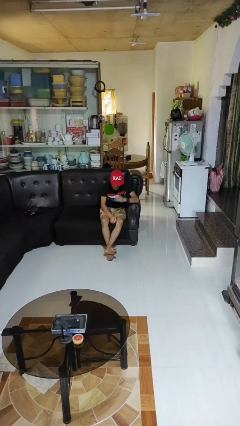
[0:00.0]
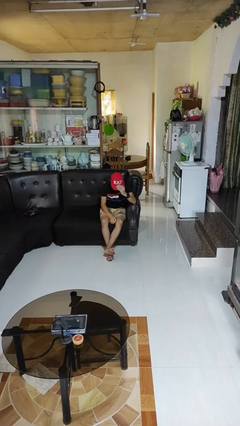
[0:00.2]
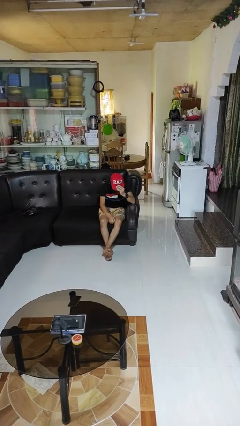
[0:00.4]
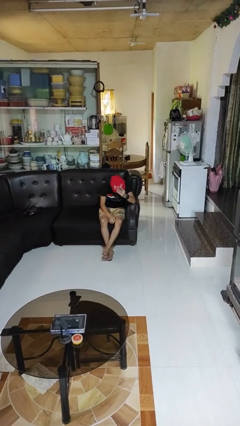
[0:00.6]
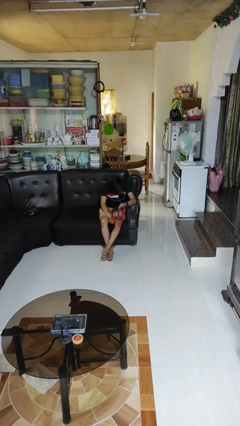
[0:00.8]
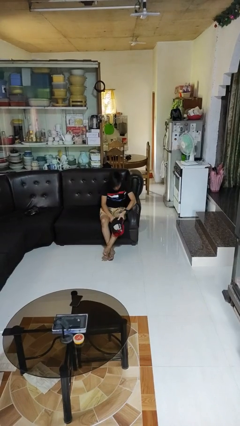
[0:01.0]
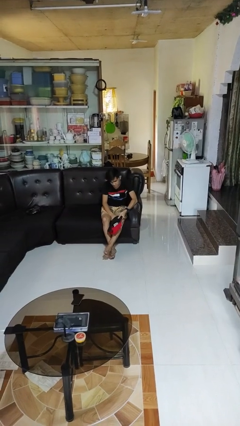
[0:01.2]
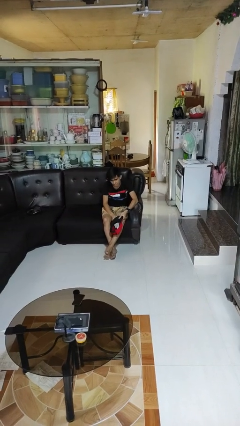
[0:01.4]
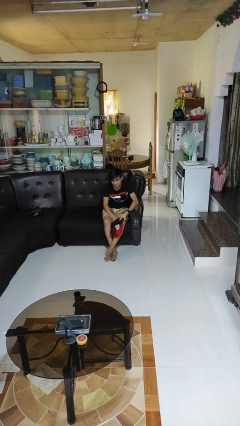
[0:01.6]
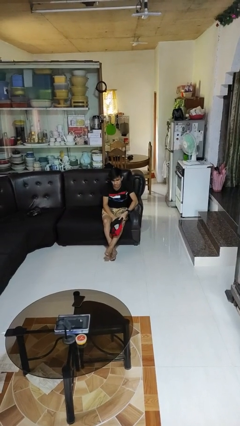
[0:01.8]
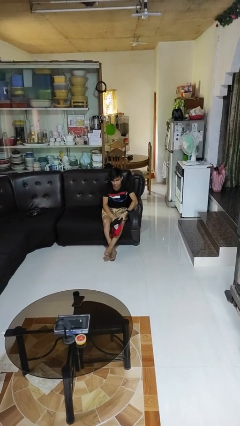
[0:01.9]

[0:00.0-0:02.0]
person takes off hat

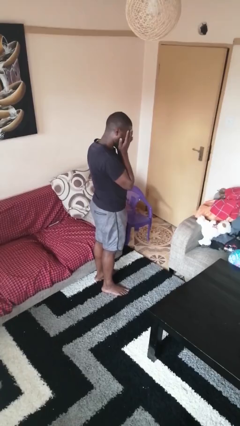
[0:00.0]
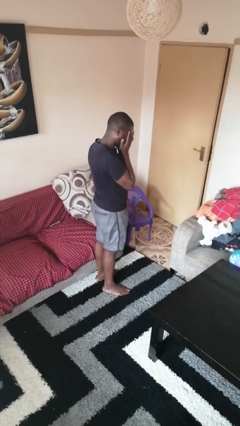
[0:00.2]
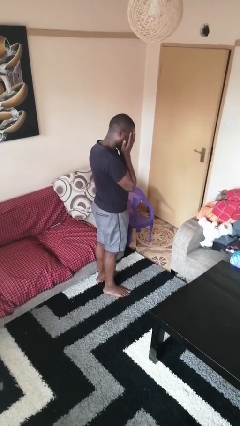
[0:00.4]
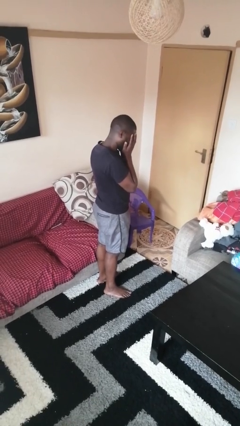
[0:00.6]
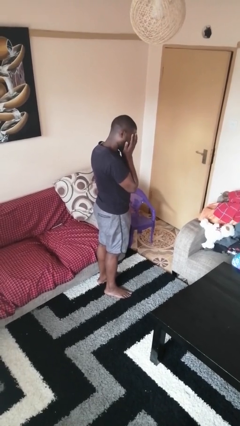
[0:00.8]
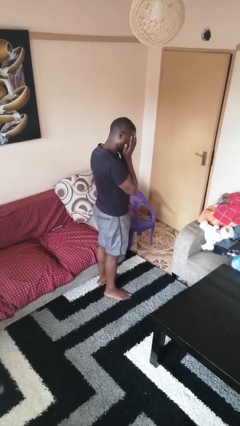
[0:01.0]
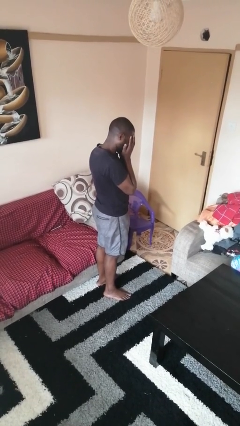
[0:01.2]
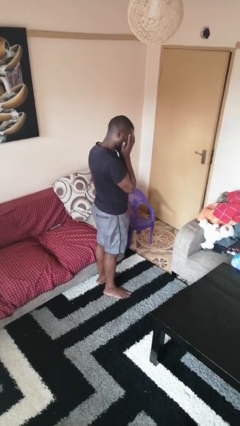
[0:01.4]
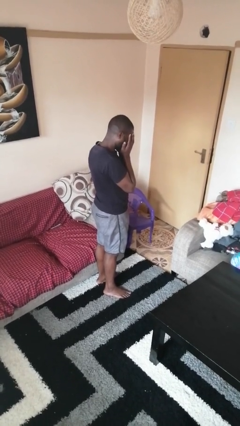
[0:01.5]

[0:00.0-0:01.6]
person covers face with hands

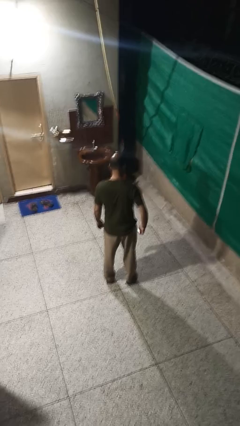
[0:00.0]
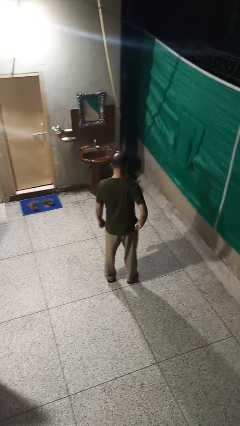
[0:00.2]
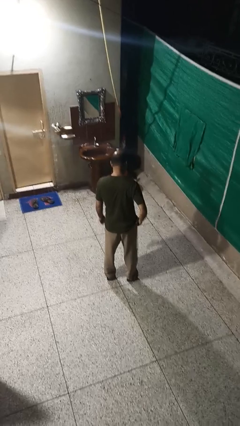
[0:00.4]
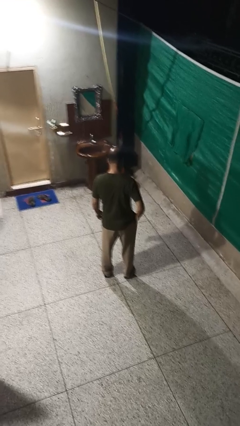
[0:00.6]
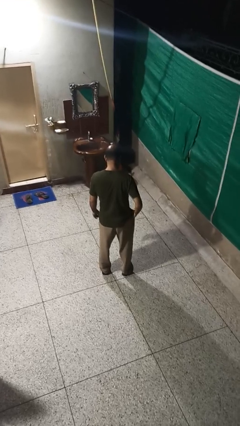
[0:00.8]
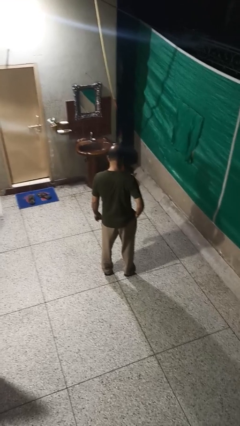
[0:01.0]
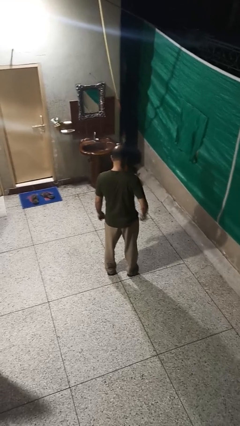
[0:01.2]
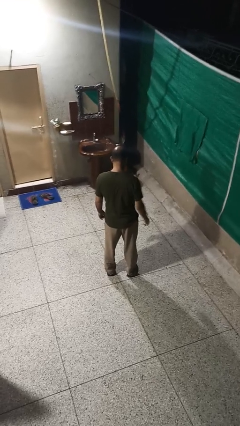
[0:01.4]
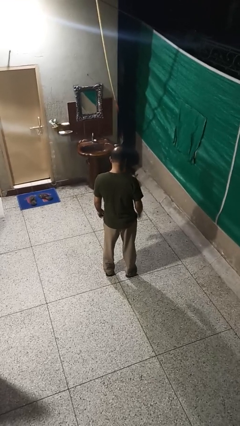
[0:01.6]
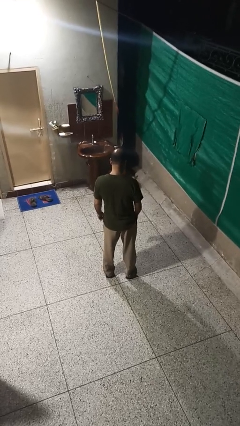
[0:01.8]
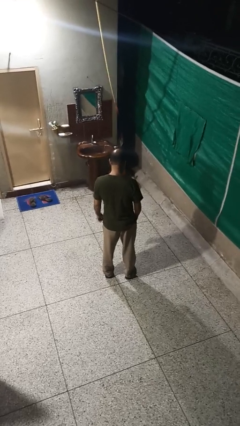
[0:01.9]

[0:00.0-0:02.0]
person puts phone into pocket

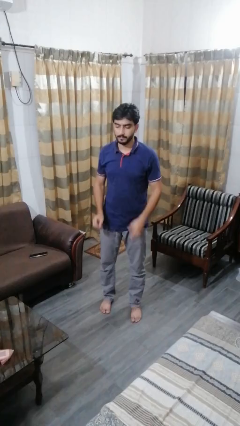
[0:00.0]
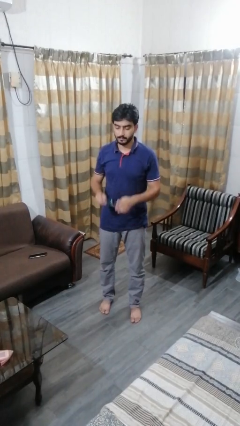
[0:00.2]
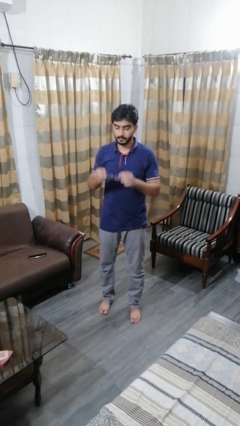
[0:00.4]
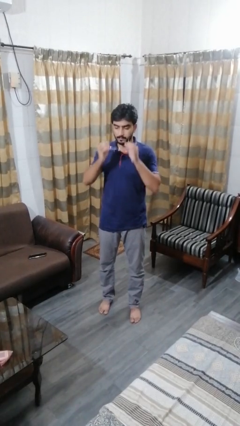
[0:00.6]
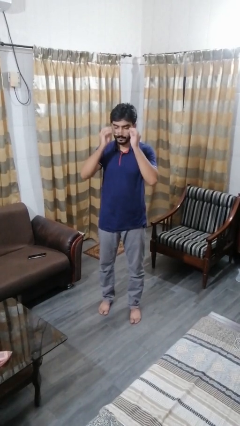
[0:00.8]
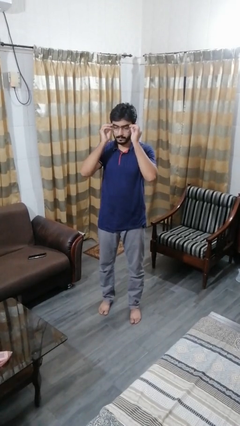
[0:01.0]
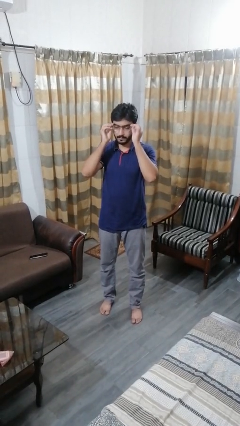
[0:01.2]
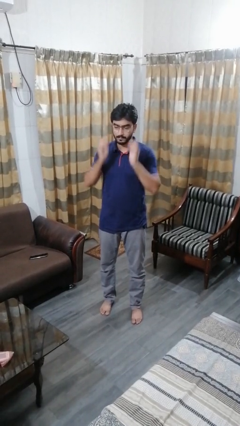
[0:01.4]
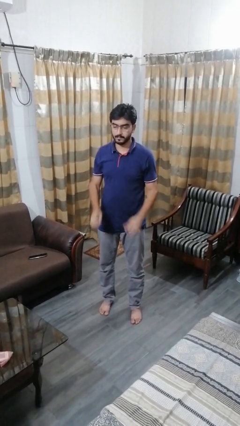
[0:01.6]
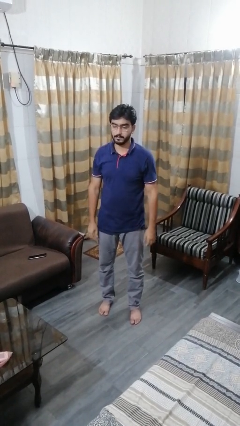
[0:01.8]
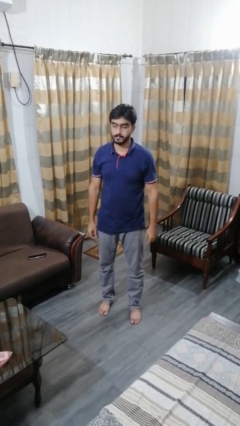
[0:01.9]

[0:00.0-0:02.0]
person puts on glasses

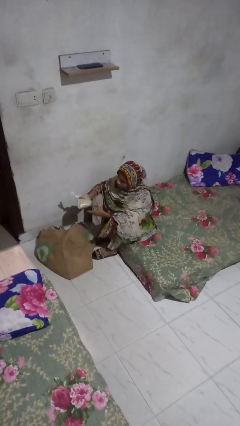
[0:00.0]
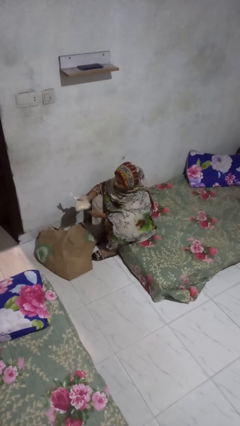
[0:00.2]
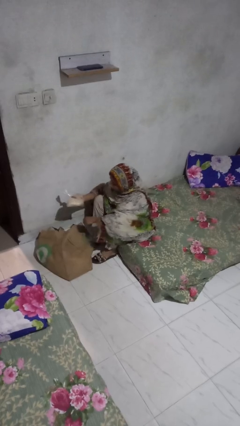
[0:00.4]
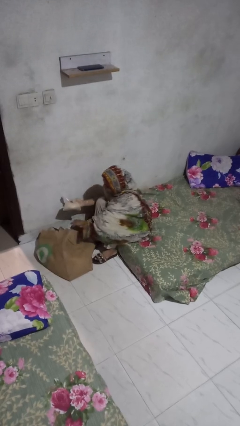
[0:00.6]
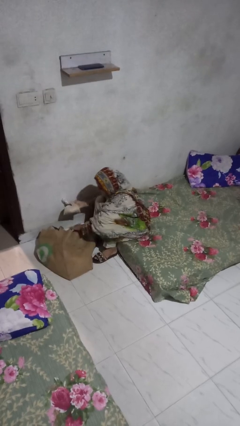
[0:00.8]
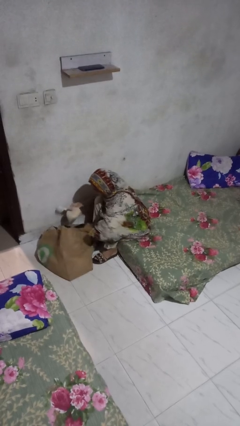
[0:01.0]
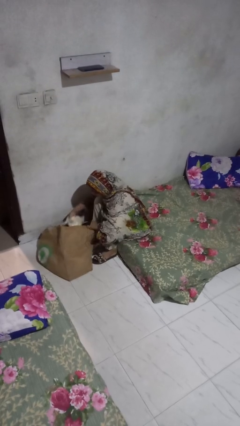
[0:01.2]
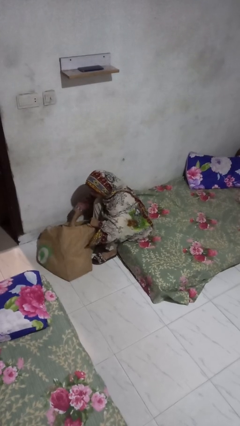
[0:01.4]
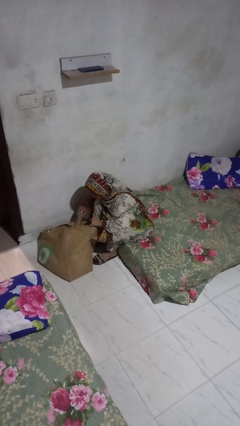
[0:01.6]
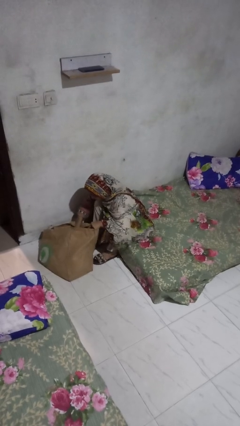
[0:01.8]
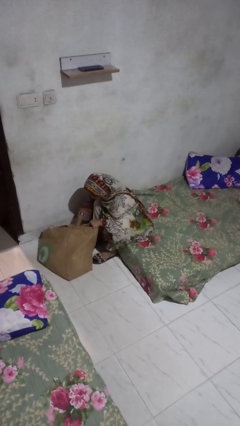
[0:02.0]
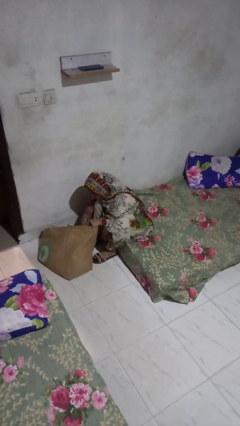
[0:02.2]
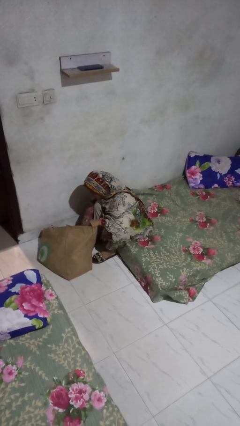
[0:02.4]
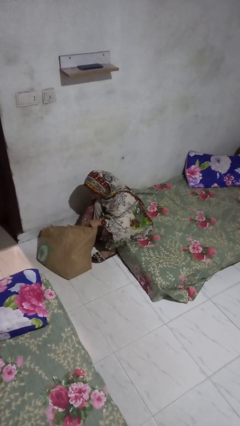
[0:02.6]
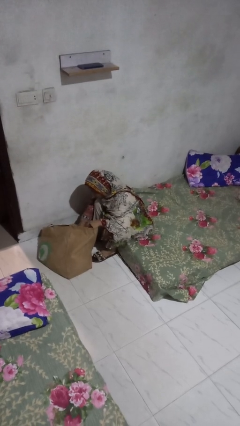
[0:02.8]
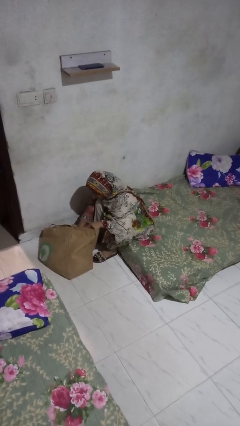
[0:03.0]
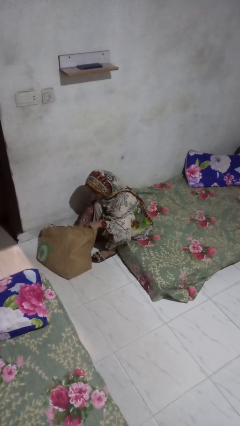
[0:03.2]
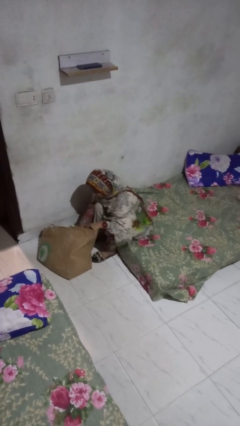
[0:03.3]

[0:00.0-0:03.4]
person puts object into bag

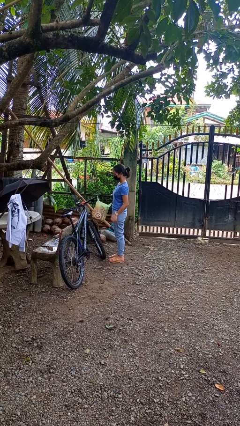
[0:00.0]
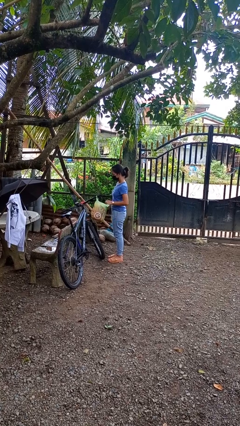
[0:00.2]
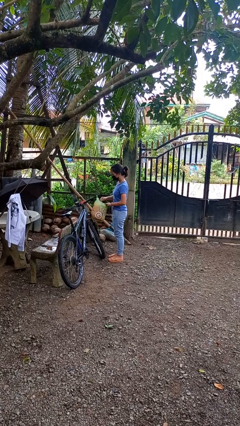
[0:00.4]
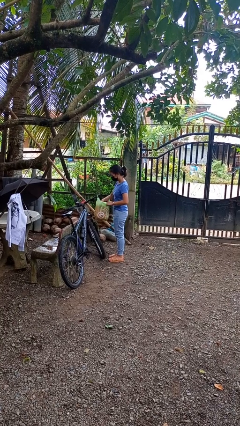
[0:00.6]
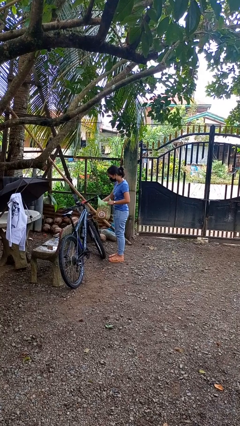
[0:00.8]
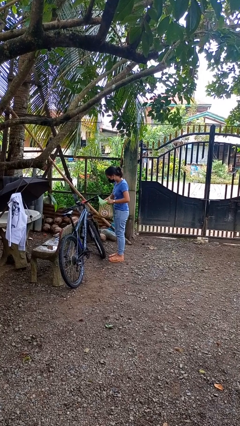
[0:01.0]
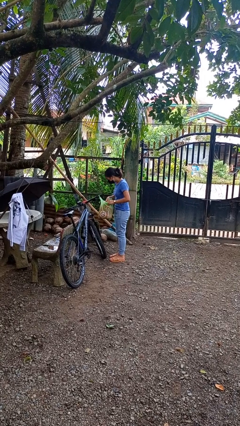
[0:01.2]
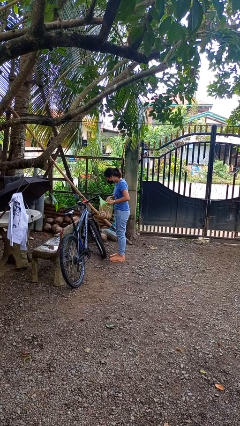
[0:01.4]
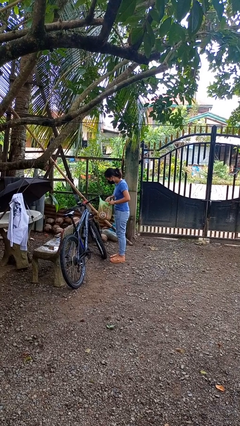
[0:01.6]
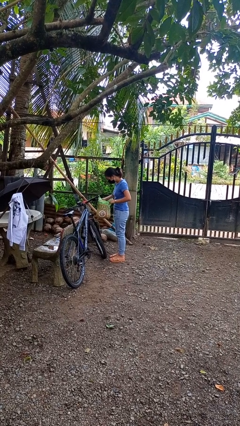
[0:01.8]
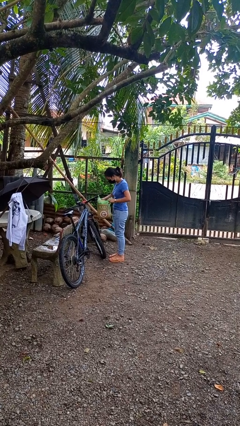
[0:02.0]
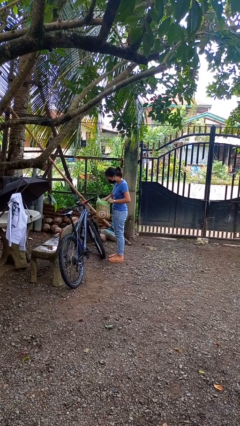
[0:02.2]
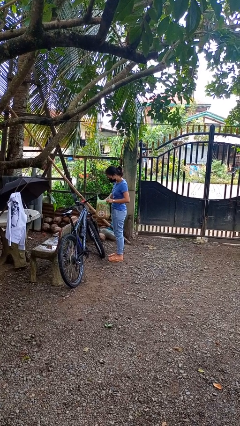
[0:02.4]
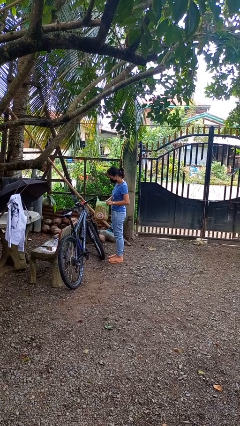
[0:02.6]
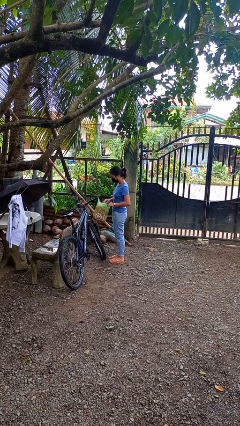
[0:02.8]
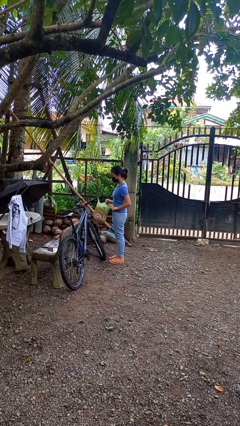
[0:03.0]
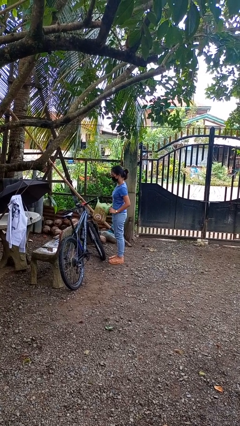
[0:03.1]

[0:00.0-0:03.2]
person searches in bag

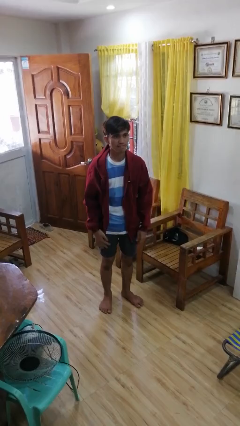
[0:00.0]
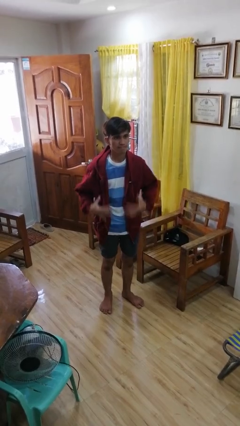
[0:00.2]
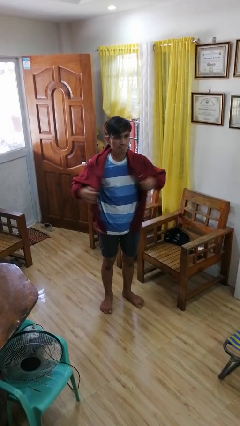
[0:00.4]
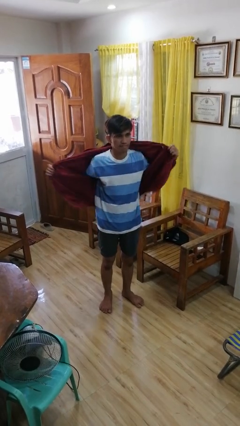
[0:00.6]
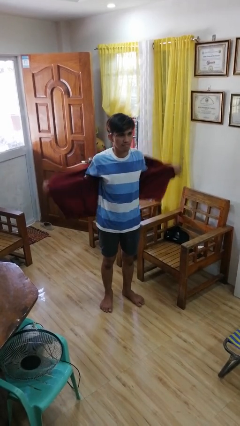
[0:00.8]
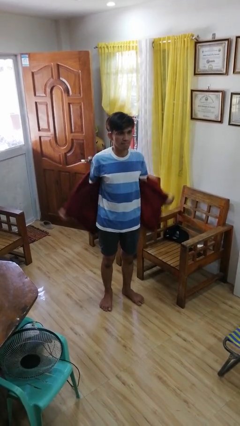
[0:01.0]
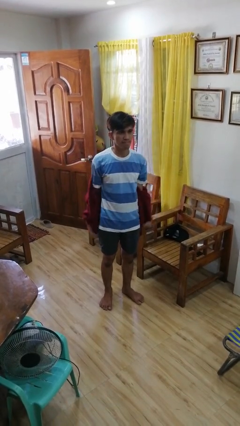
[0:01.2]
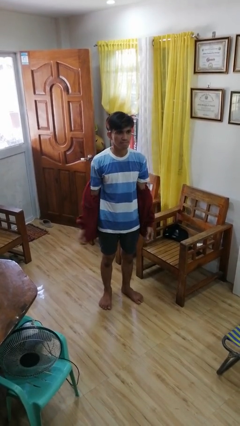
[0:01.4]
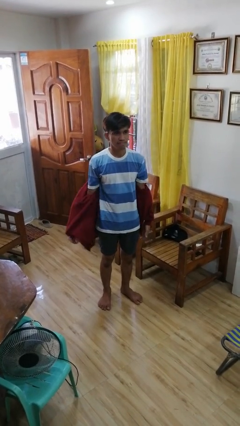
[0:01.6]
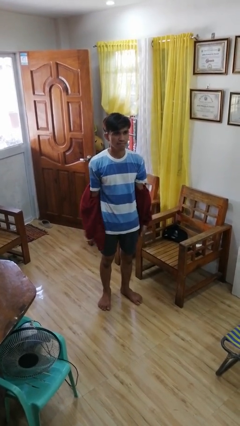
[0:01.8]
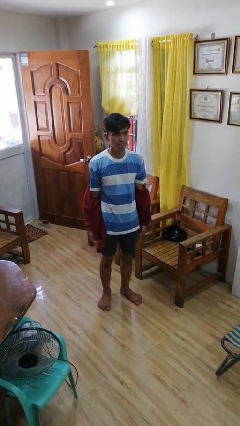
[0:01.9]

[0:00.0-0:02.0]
person takes off jacket

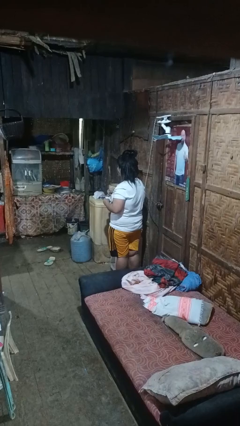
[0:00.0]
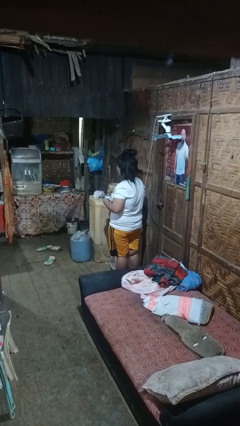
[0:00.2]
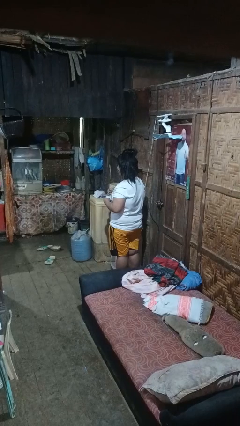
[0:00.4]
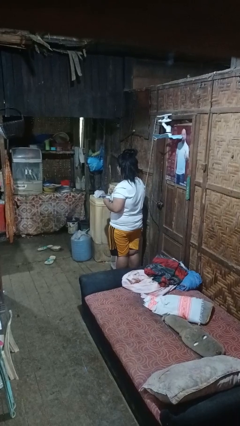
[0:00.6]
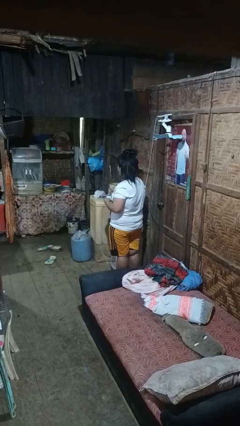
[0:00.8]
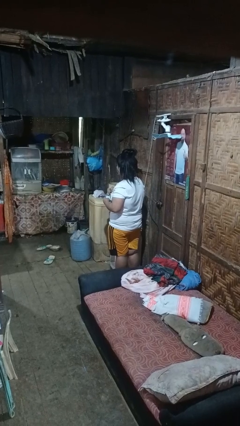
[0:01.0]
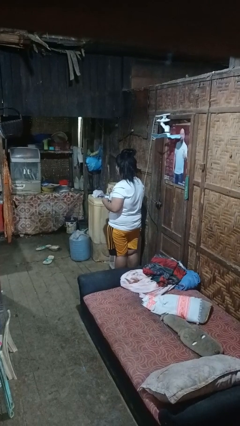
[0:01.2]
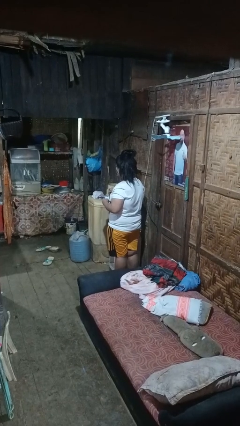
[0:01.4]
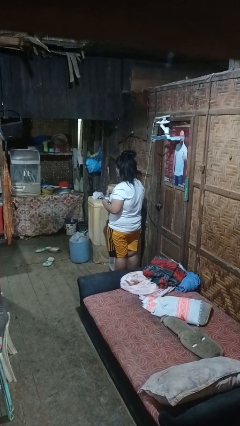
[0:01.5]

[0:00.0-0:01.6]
person stirs mug
